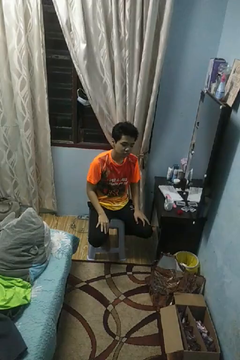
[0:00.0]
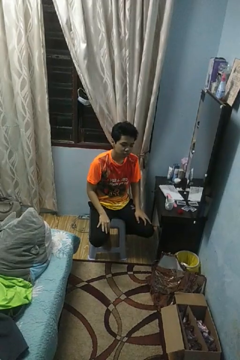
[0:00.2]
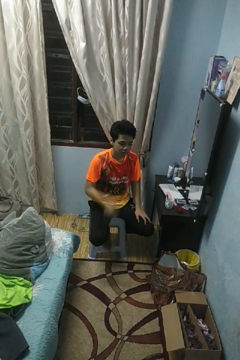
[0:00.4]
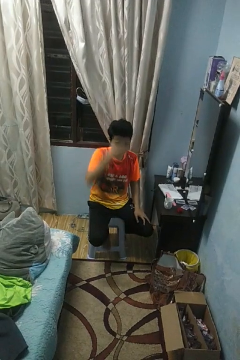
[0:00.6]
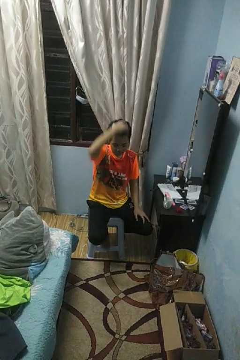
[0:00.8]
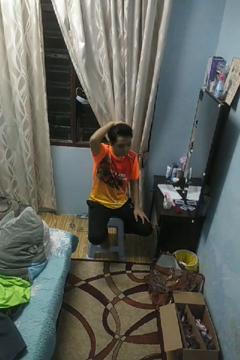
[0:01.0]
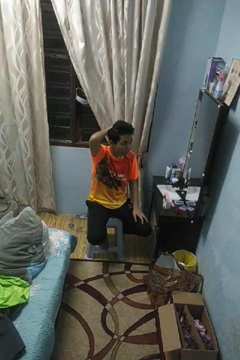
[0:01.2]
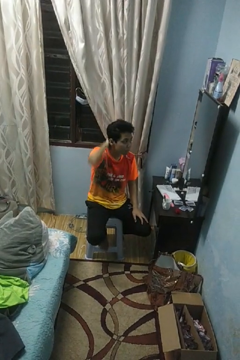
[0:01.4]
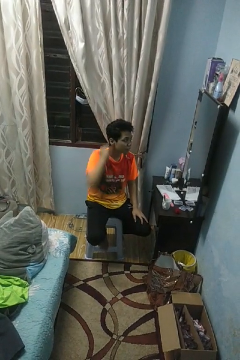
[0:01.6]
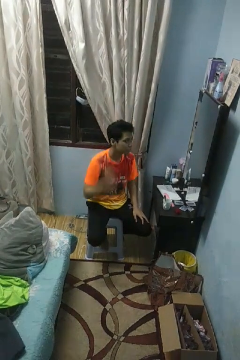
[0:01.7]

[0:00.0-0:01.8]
person strokes hair

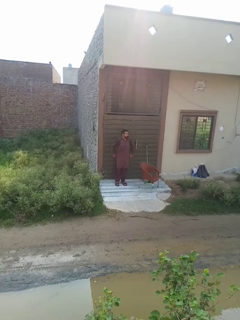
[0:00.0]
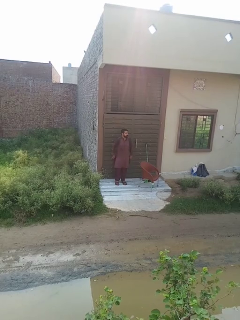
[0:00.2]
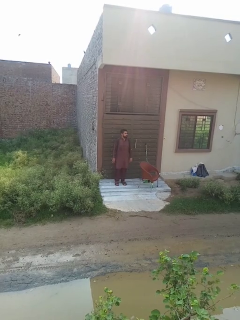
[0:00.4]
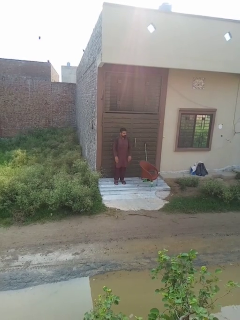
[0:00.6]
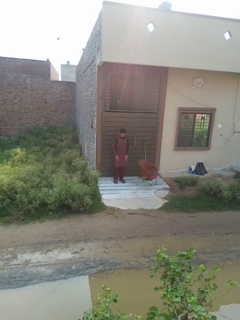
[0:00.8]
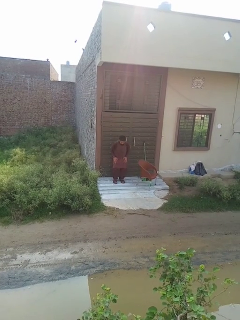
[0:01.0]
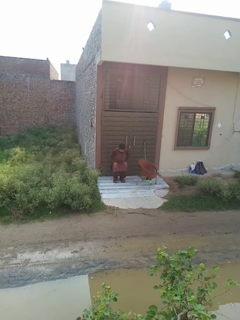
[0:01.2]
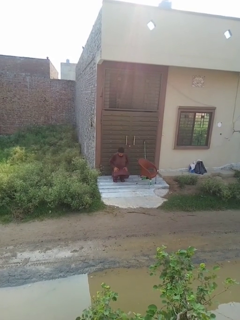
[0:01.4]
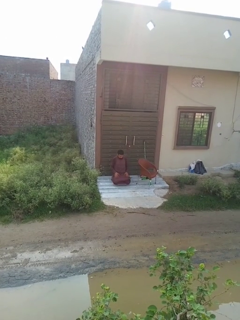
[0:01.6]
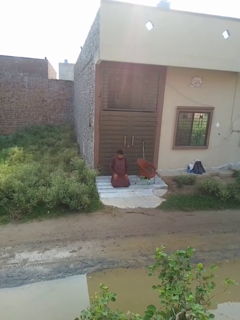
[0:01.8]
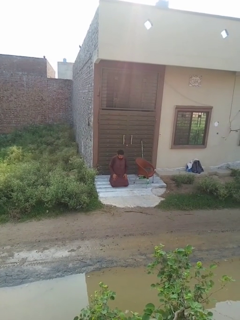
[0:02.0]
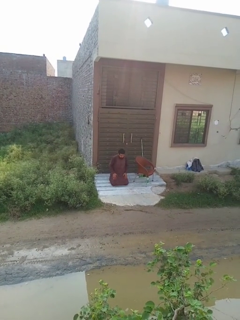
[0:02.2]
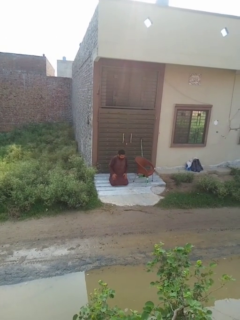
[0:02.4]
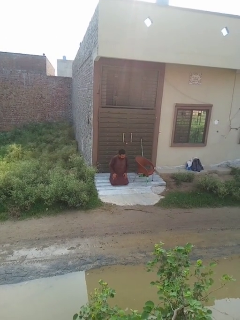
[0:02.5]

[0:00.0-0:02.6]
person kneels

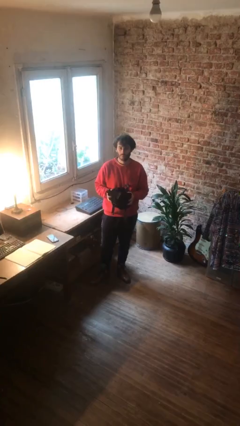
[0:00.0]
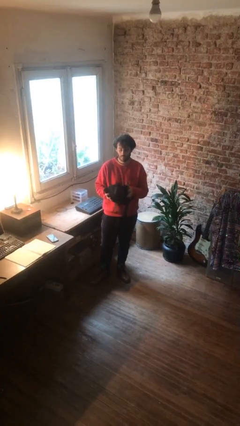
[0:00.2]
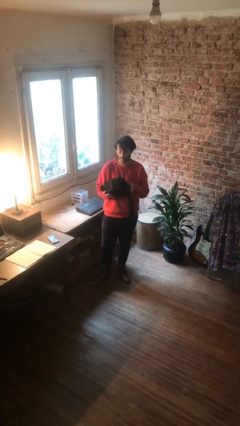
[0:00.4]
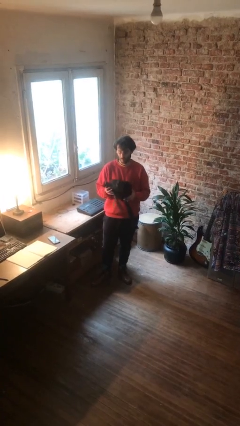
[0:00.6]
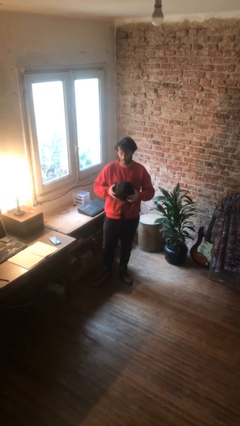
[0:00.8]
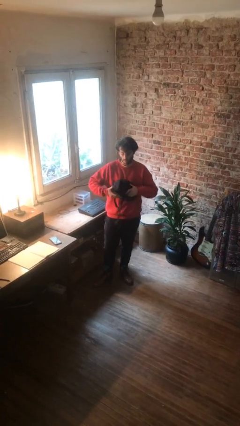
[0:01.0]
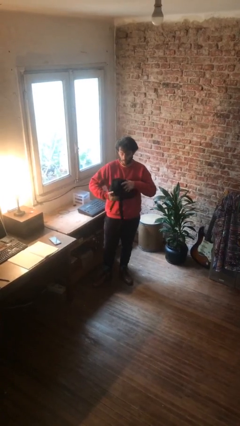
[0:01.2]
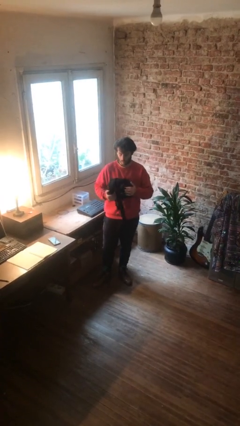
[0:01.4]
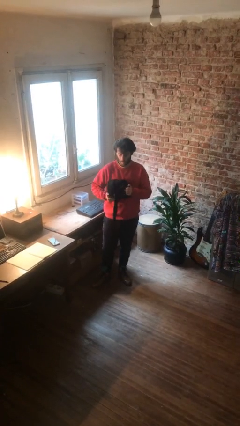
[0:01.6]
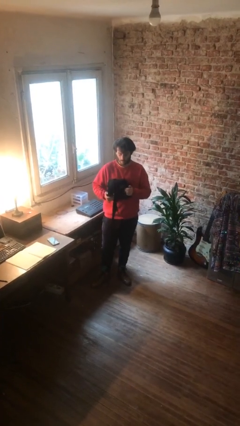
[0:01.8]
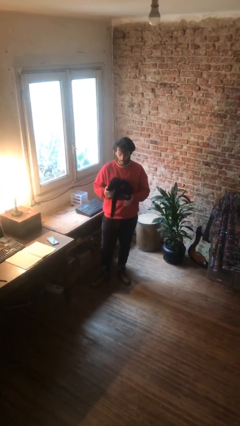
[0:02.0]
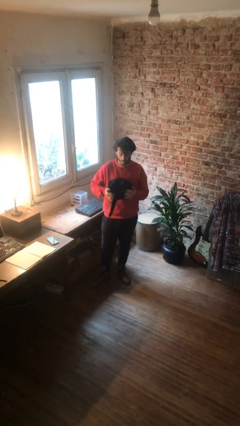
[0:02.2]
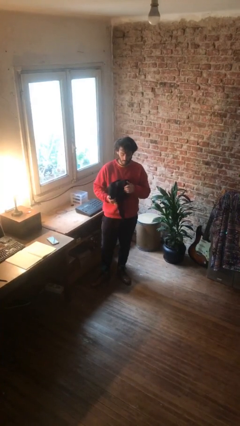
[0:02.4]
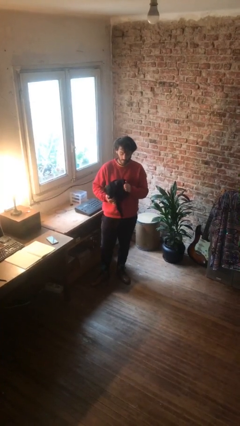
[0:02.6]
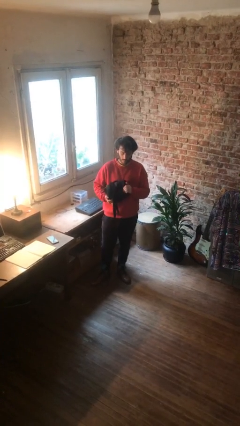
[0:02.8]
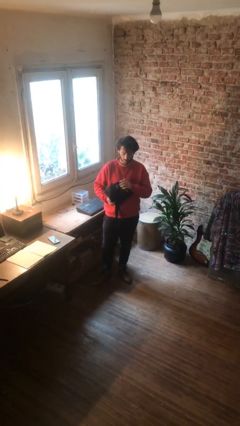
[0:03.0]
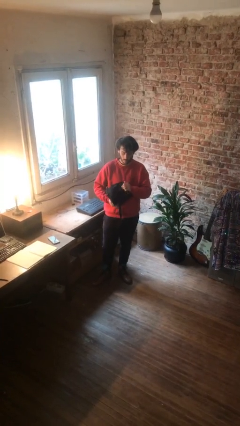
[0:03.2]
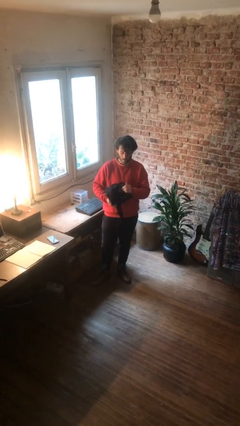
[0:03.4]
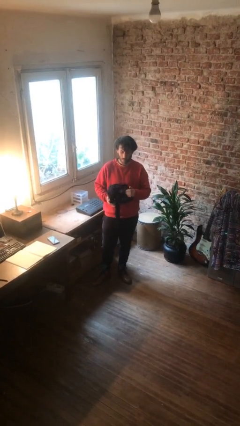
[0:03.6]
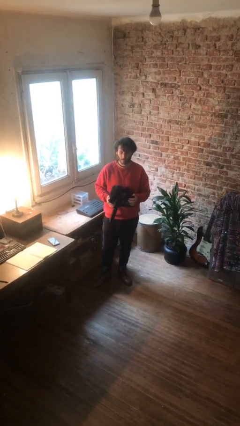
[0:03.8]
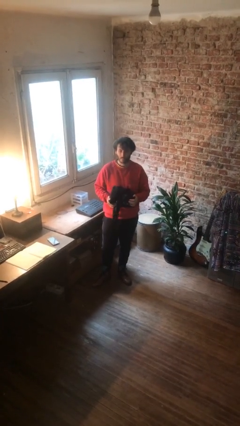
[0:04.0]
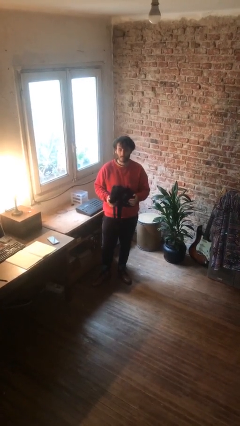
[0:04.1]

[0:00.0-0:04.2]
person squeezes object

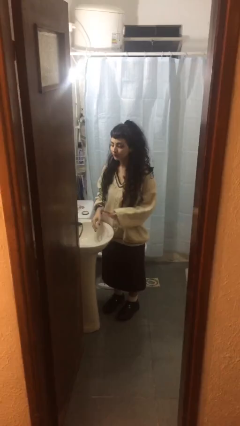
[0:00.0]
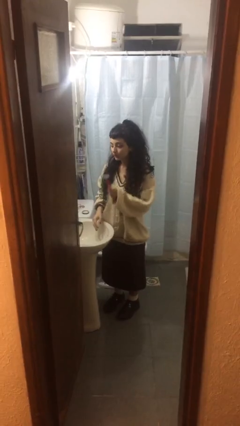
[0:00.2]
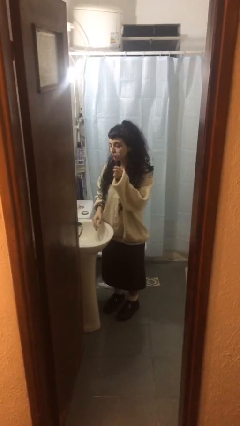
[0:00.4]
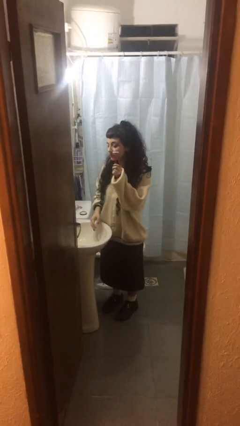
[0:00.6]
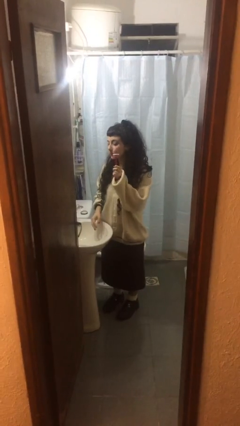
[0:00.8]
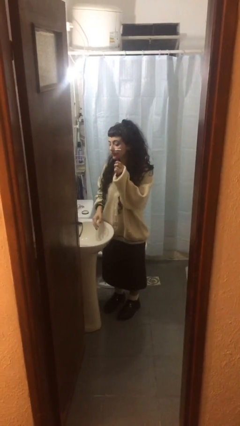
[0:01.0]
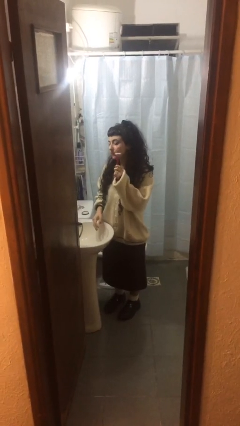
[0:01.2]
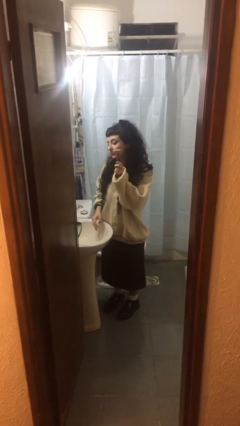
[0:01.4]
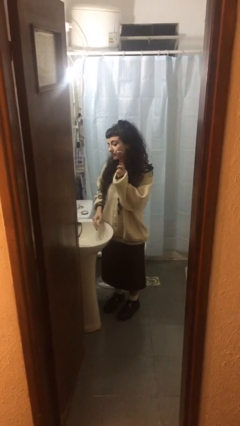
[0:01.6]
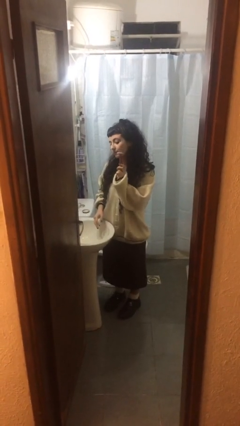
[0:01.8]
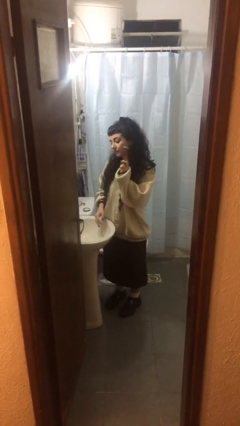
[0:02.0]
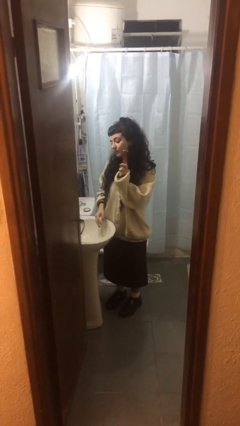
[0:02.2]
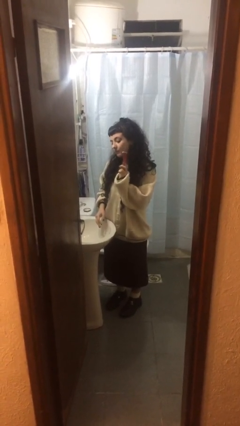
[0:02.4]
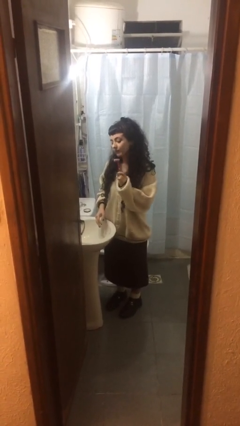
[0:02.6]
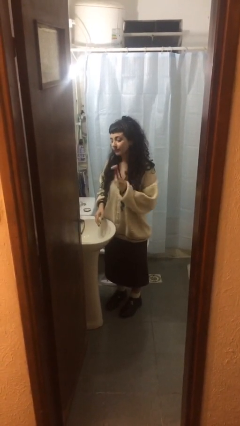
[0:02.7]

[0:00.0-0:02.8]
person shaves face

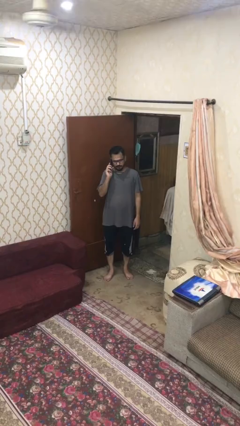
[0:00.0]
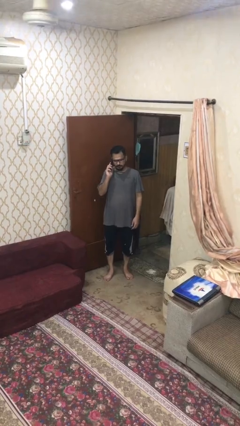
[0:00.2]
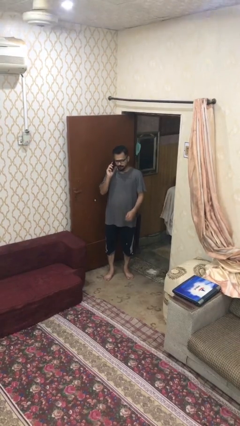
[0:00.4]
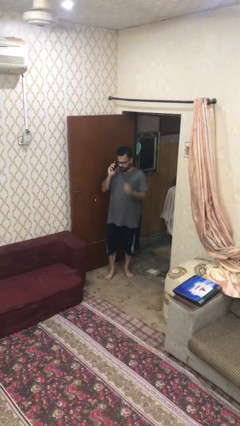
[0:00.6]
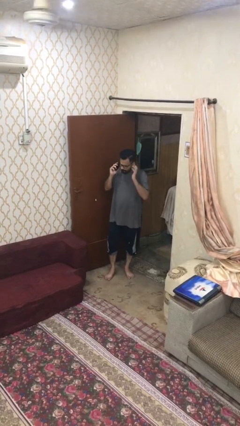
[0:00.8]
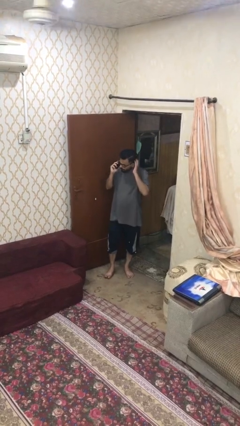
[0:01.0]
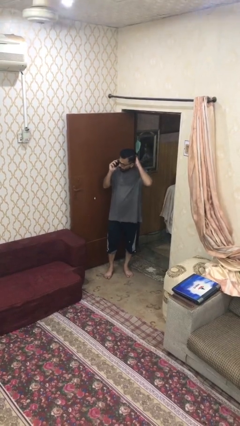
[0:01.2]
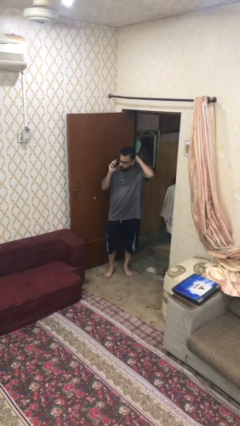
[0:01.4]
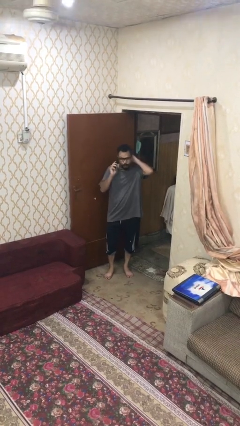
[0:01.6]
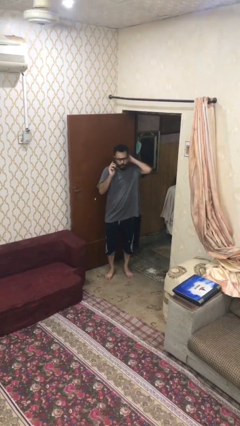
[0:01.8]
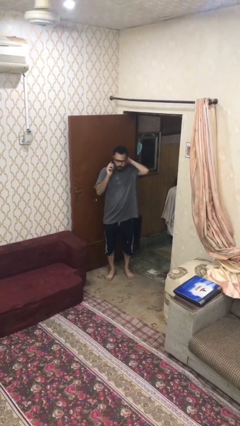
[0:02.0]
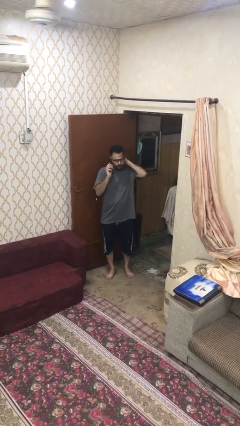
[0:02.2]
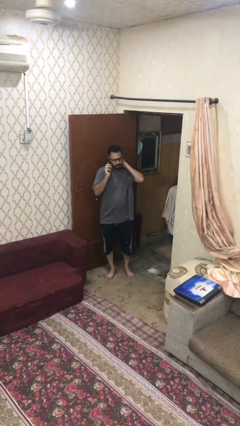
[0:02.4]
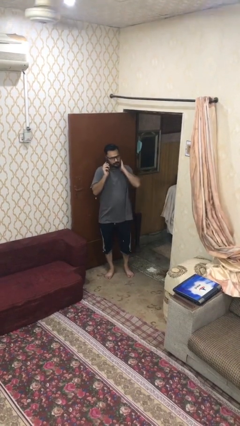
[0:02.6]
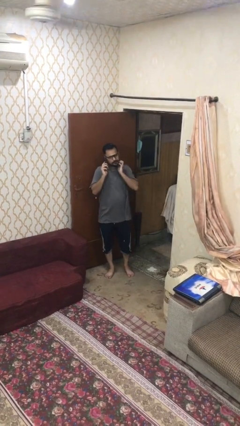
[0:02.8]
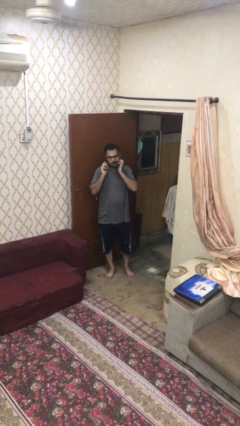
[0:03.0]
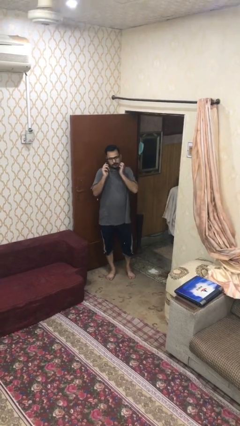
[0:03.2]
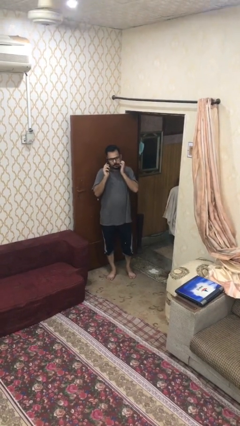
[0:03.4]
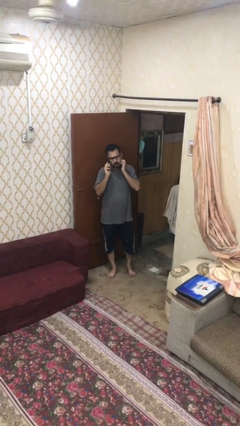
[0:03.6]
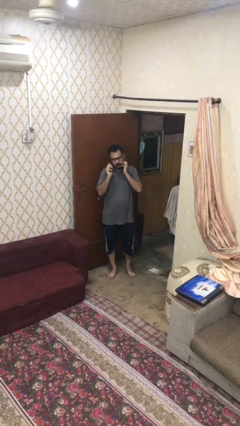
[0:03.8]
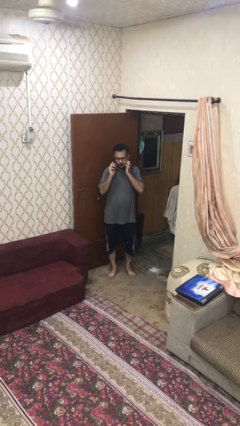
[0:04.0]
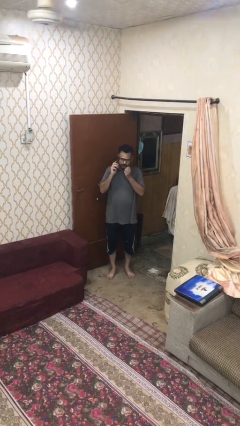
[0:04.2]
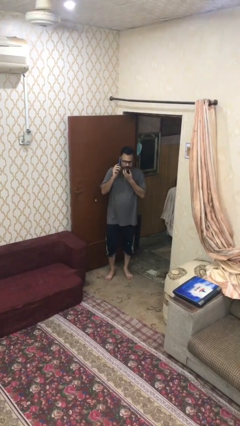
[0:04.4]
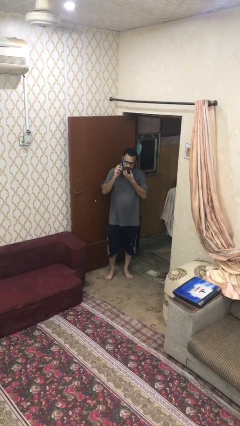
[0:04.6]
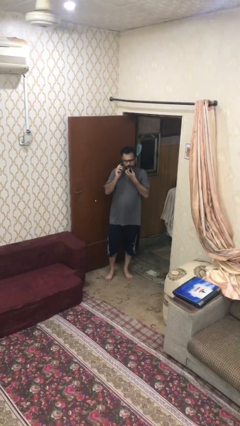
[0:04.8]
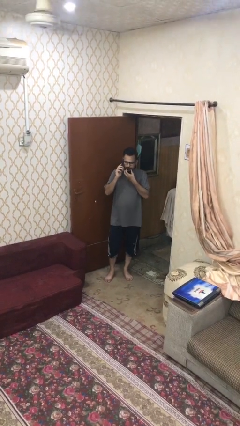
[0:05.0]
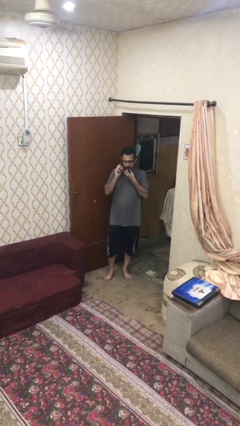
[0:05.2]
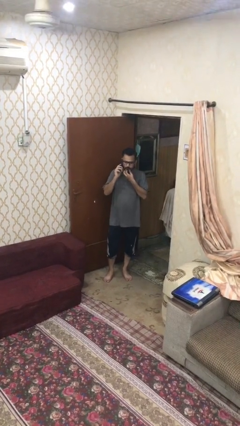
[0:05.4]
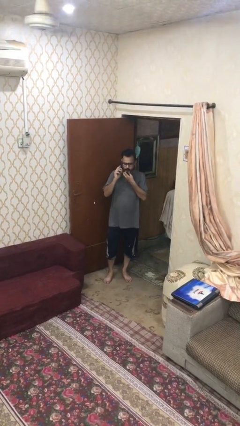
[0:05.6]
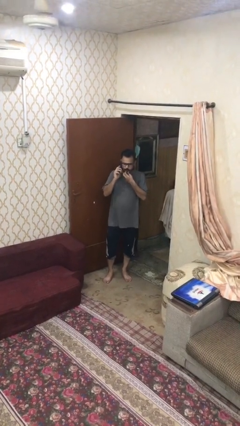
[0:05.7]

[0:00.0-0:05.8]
person talks on phone

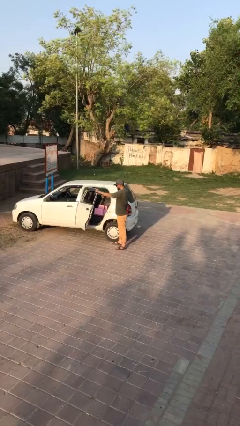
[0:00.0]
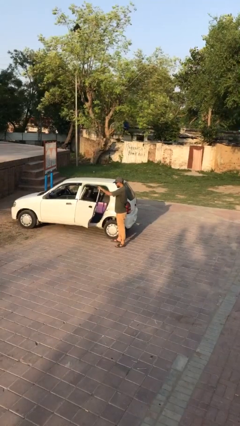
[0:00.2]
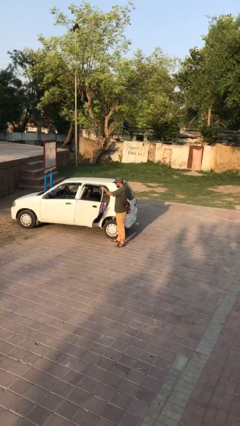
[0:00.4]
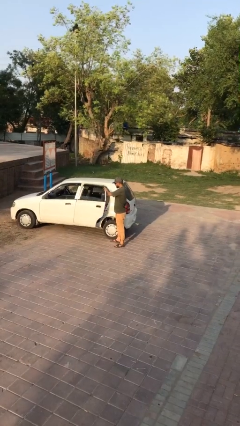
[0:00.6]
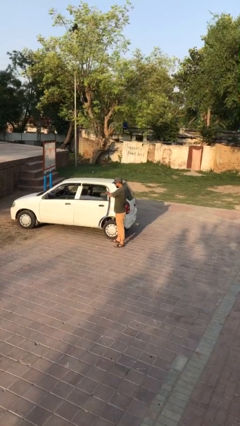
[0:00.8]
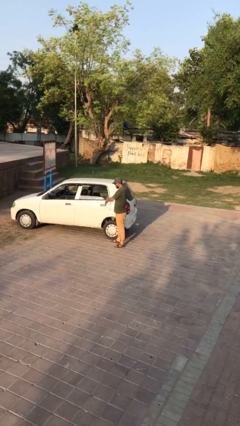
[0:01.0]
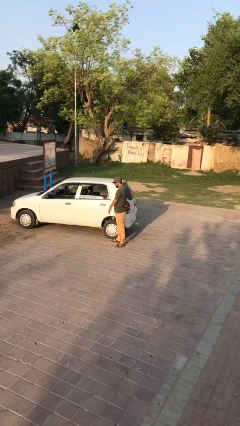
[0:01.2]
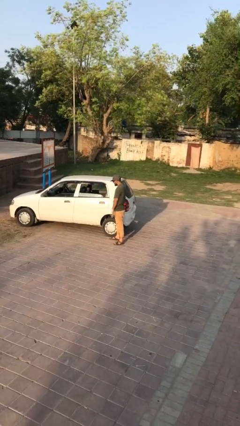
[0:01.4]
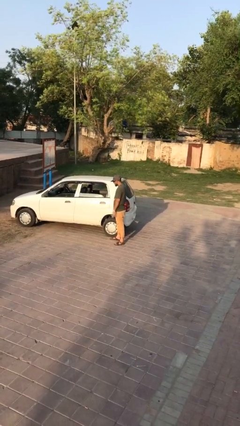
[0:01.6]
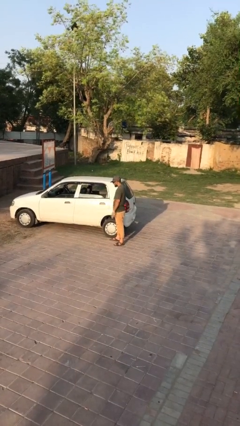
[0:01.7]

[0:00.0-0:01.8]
person closes car door
